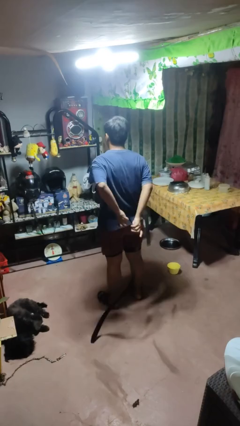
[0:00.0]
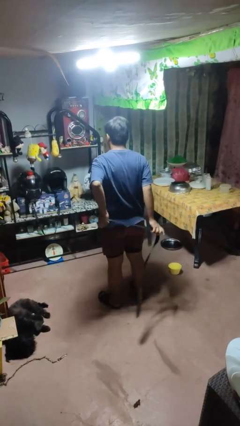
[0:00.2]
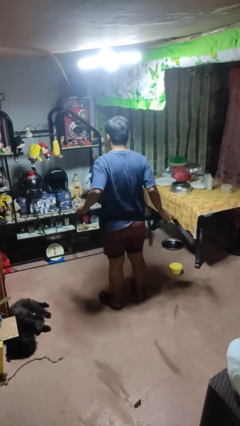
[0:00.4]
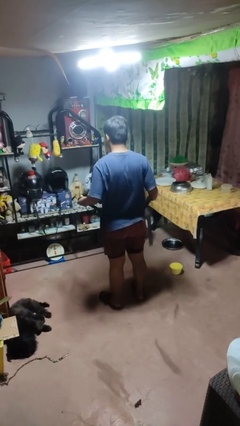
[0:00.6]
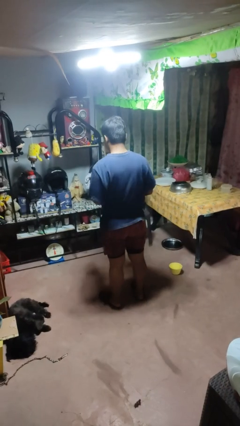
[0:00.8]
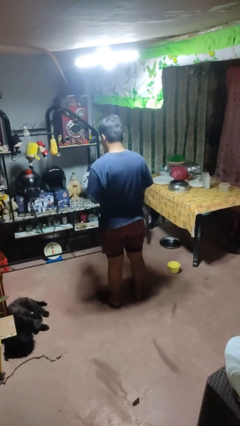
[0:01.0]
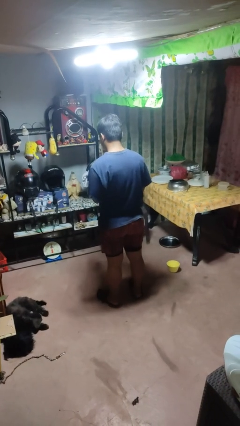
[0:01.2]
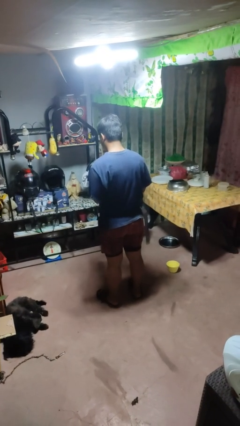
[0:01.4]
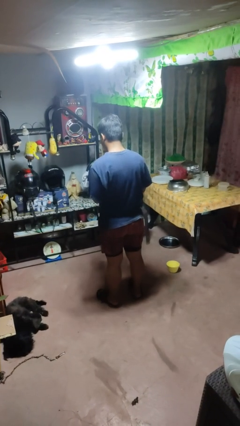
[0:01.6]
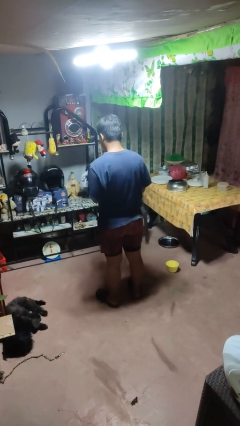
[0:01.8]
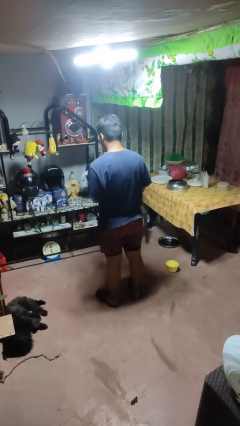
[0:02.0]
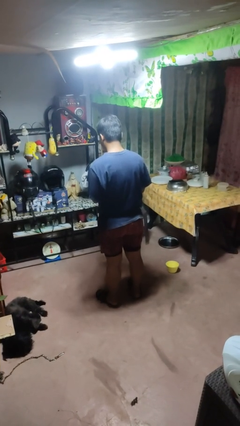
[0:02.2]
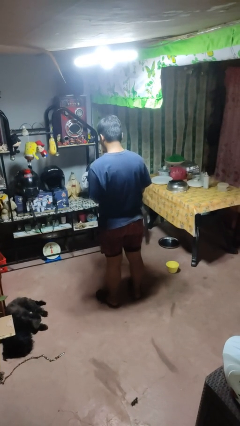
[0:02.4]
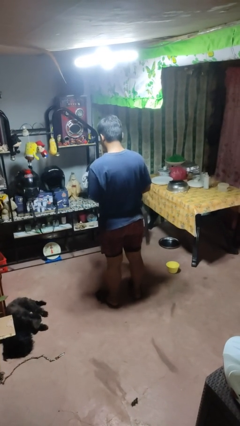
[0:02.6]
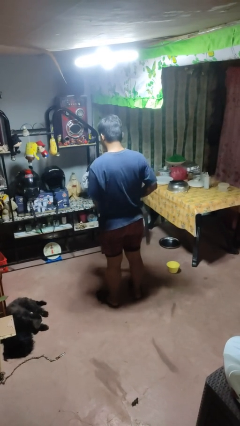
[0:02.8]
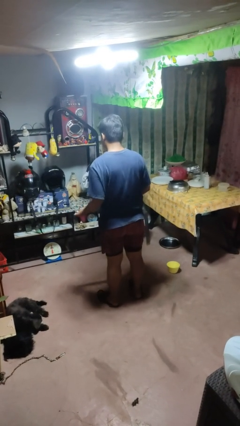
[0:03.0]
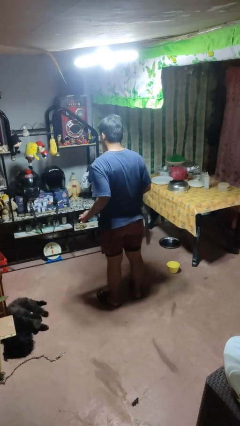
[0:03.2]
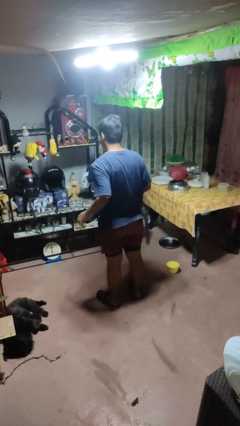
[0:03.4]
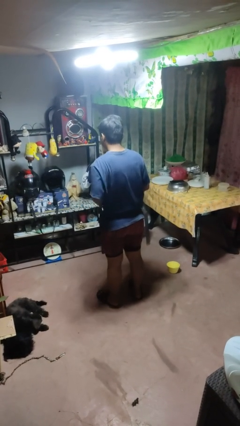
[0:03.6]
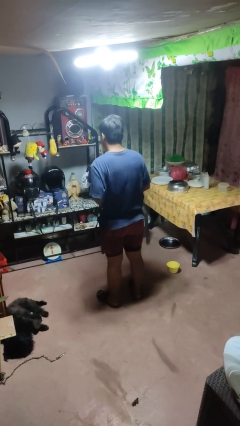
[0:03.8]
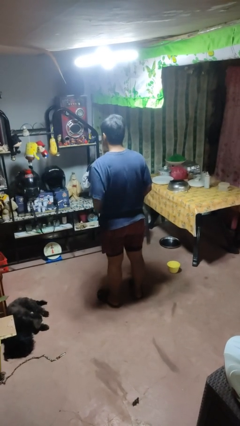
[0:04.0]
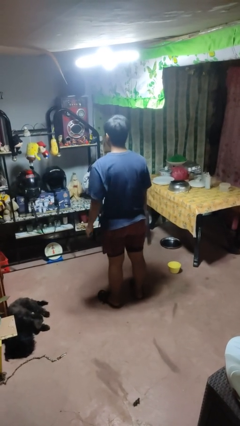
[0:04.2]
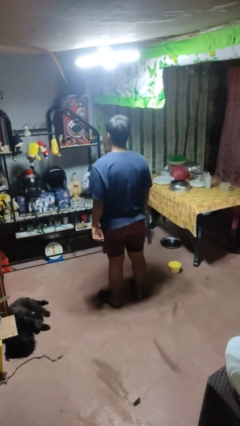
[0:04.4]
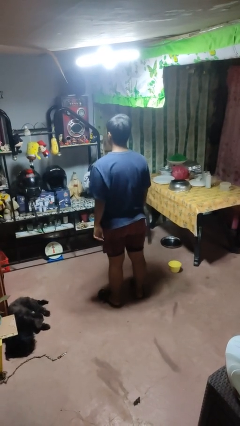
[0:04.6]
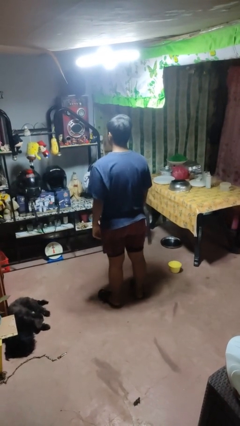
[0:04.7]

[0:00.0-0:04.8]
person puts on belt

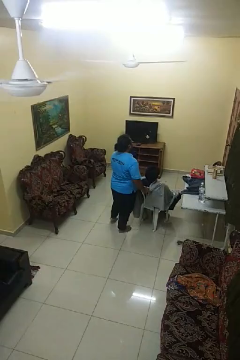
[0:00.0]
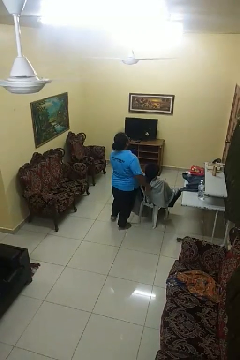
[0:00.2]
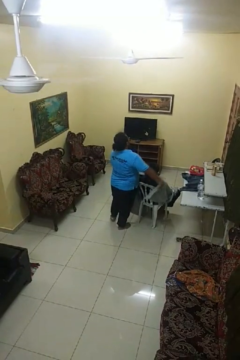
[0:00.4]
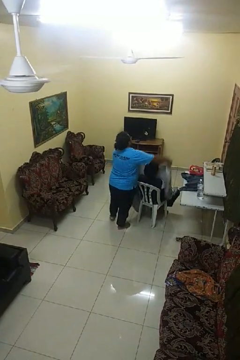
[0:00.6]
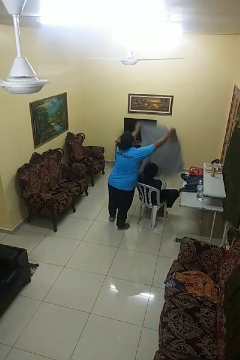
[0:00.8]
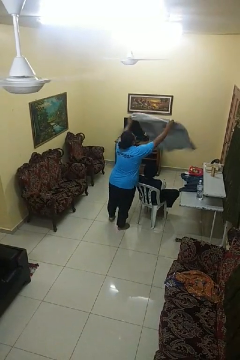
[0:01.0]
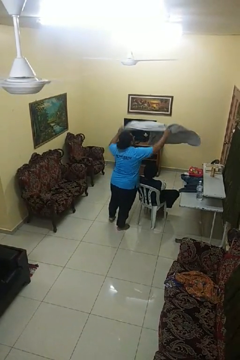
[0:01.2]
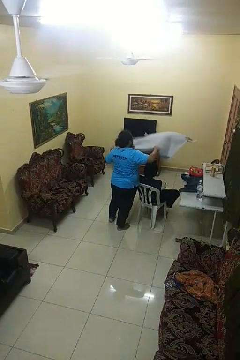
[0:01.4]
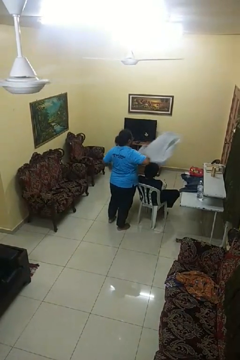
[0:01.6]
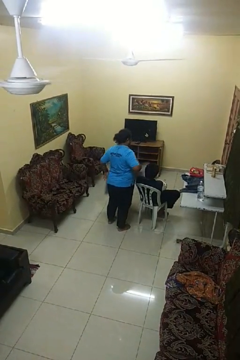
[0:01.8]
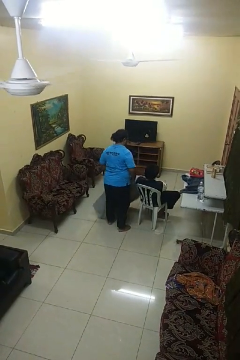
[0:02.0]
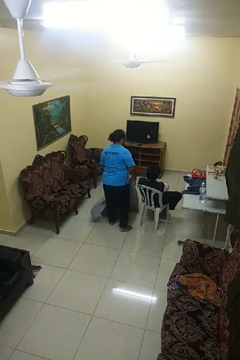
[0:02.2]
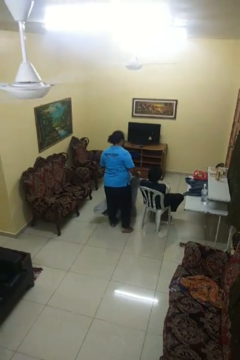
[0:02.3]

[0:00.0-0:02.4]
person uncovers friend with blanket

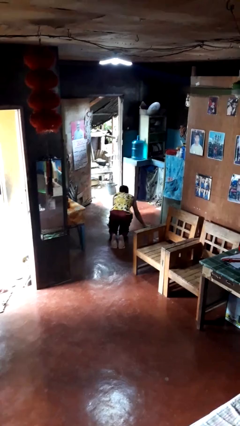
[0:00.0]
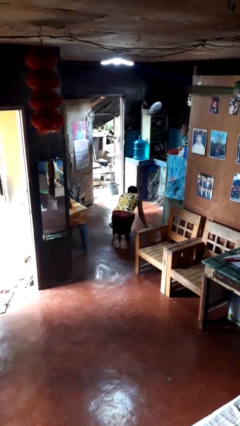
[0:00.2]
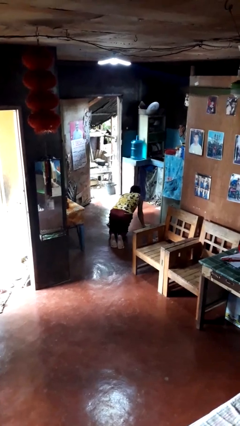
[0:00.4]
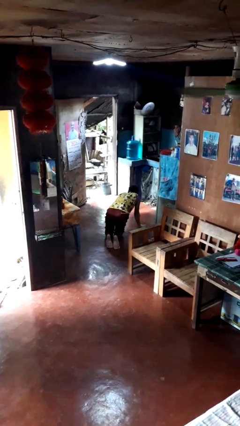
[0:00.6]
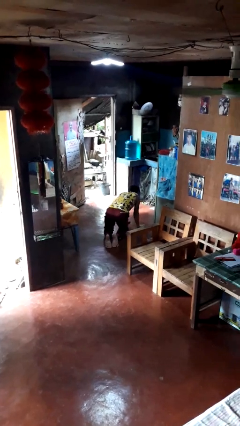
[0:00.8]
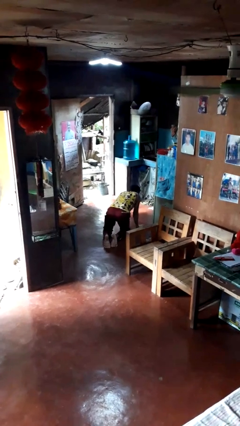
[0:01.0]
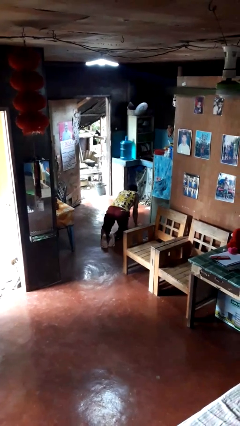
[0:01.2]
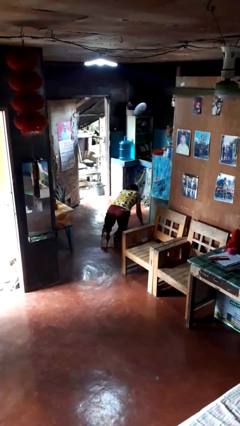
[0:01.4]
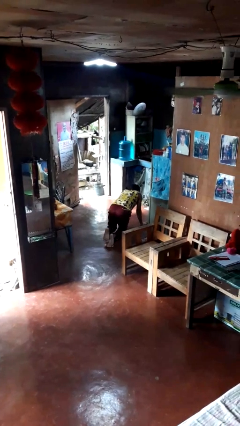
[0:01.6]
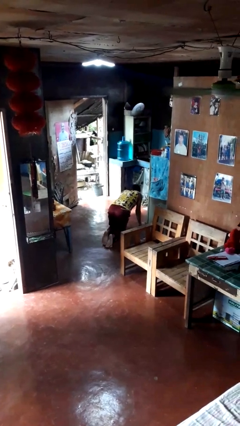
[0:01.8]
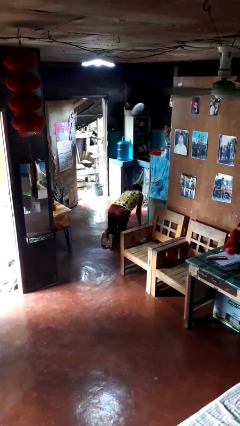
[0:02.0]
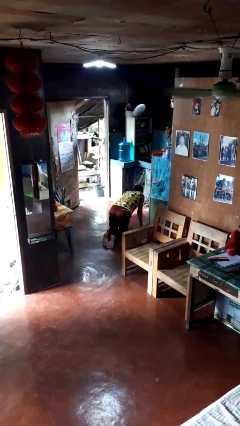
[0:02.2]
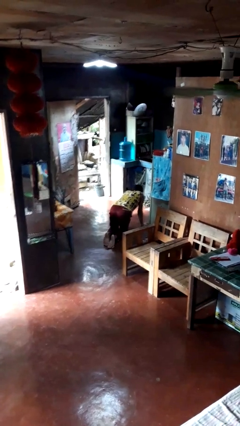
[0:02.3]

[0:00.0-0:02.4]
person crawls

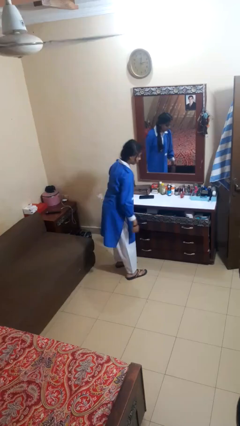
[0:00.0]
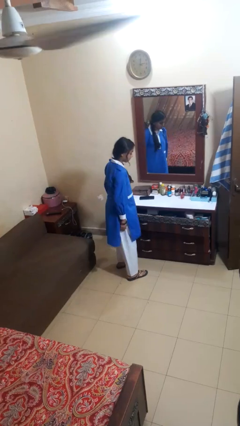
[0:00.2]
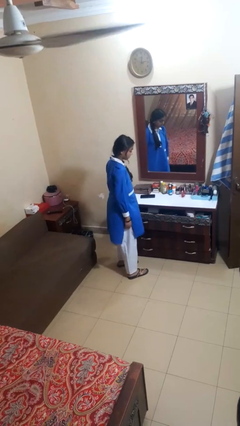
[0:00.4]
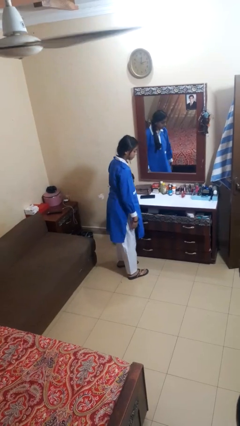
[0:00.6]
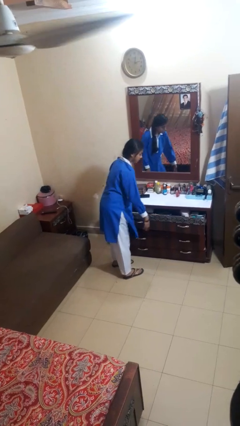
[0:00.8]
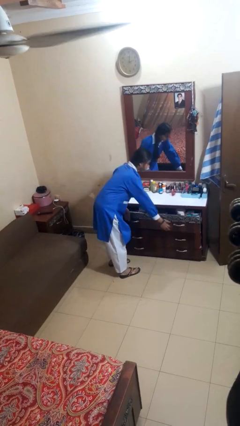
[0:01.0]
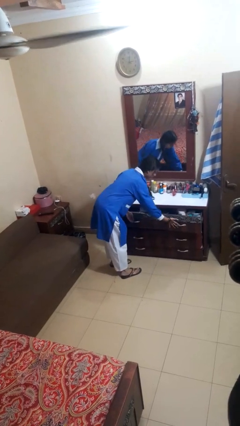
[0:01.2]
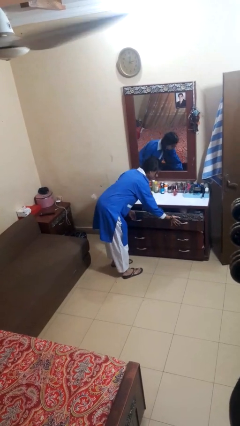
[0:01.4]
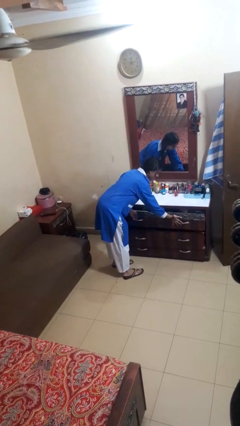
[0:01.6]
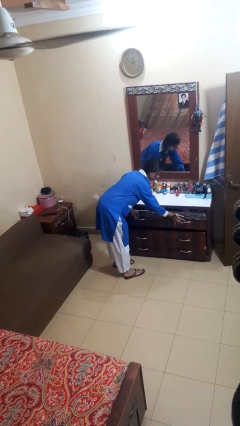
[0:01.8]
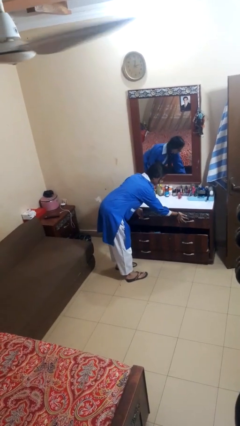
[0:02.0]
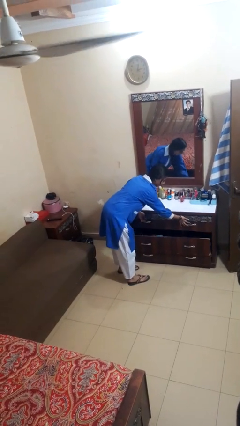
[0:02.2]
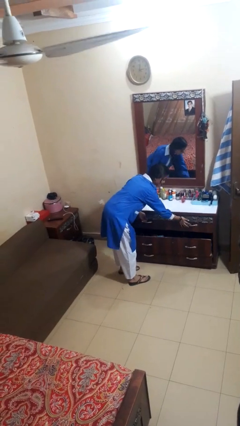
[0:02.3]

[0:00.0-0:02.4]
person closes dresser drawer

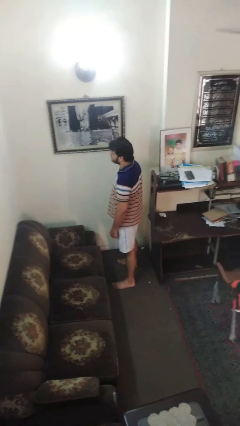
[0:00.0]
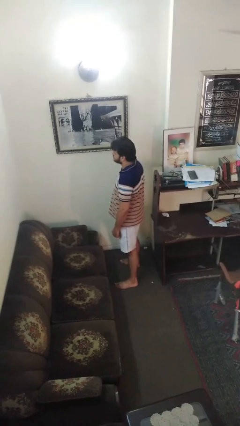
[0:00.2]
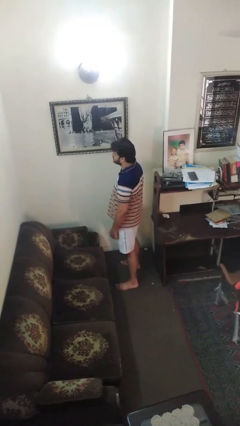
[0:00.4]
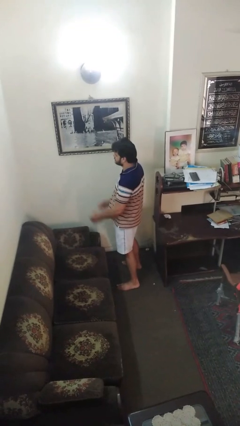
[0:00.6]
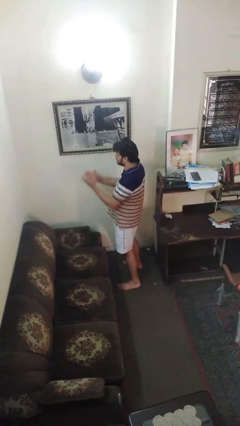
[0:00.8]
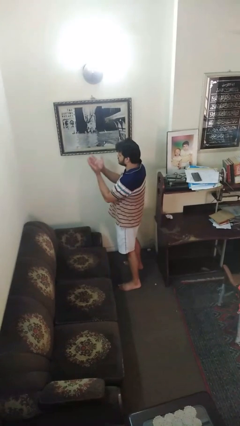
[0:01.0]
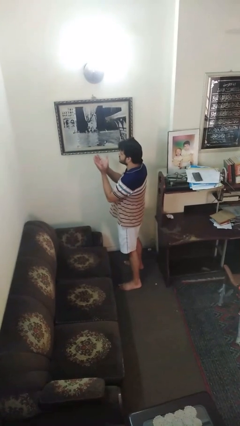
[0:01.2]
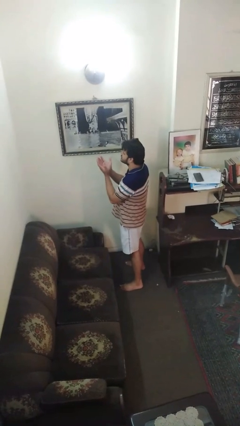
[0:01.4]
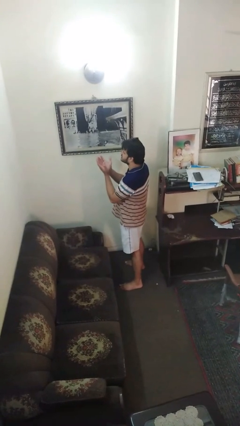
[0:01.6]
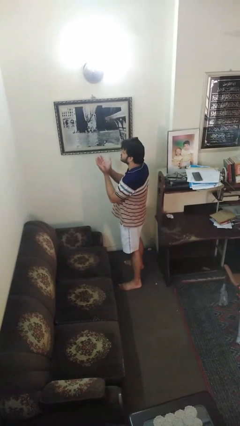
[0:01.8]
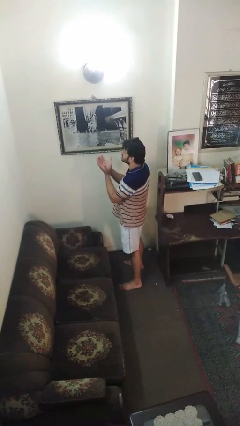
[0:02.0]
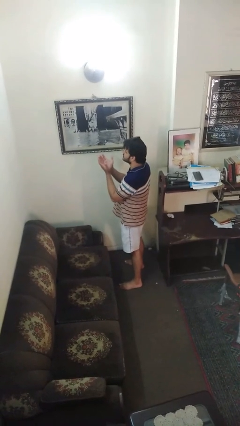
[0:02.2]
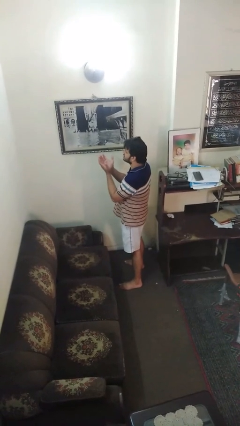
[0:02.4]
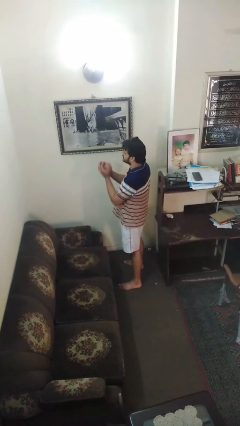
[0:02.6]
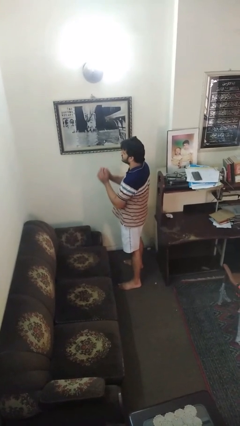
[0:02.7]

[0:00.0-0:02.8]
person prays

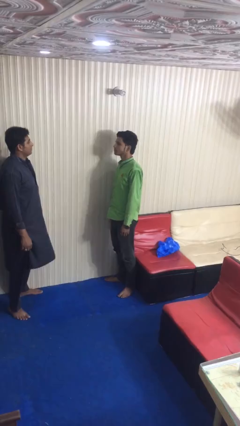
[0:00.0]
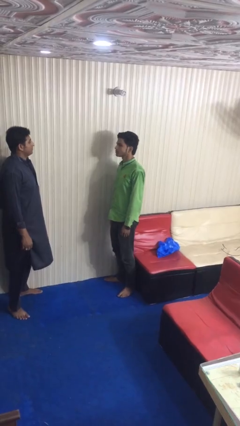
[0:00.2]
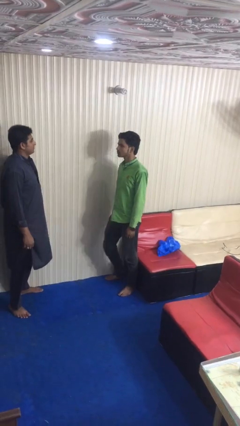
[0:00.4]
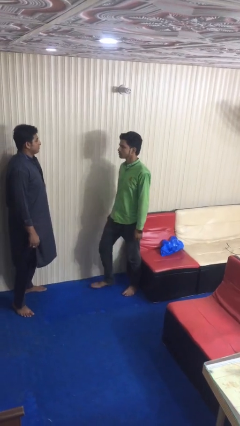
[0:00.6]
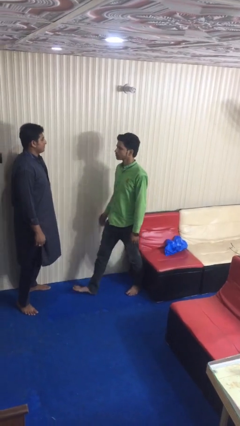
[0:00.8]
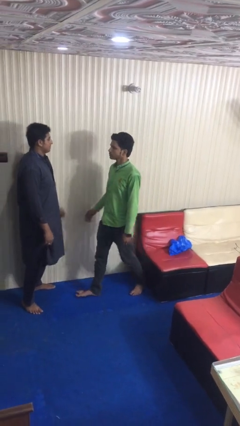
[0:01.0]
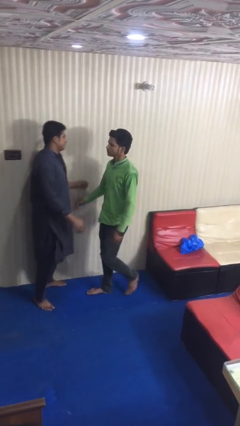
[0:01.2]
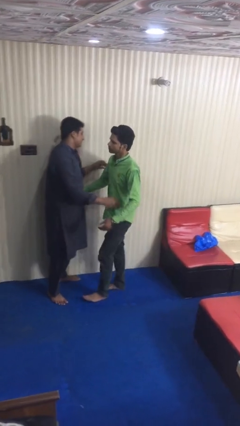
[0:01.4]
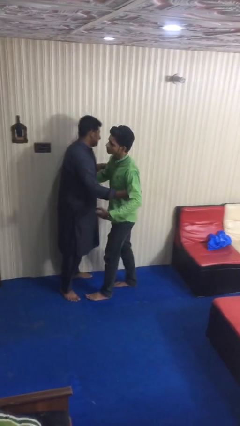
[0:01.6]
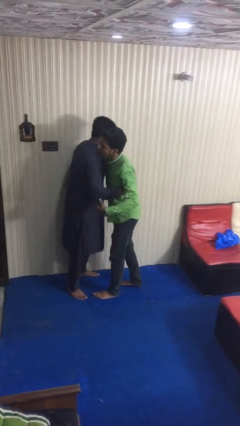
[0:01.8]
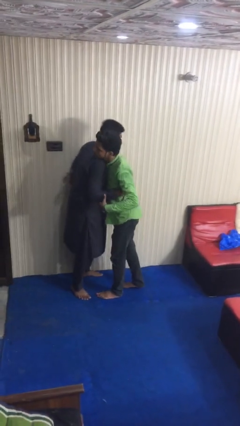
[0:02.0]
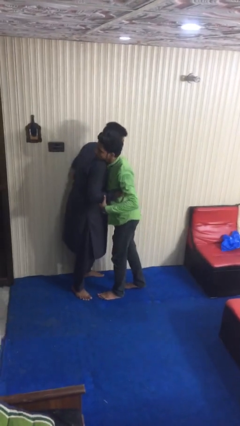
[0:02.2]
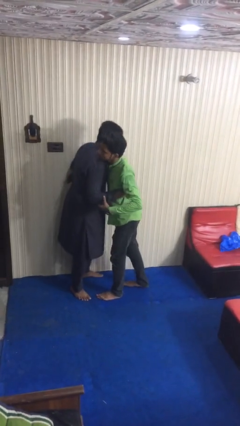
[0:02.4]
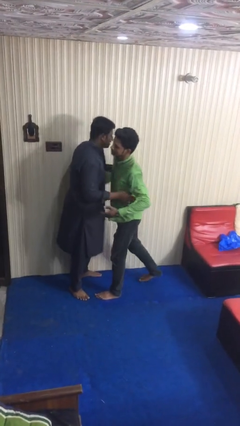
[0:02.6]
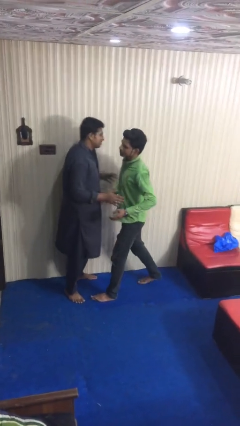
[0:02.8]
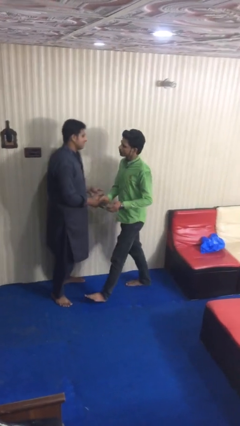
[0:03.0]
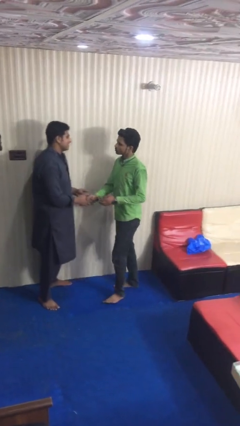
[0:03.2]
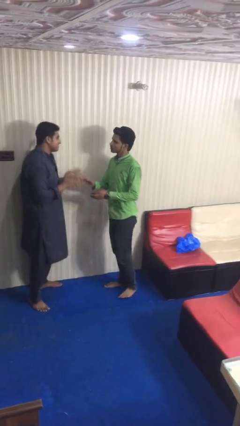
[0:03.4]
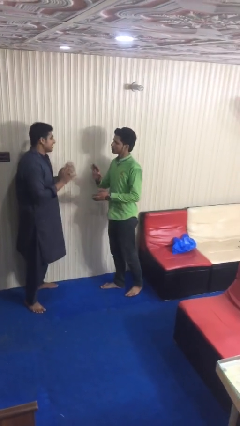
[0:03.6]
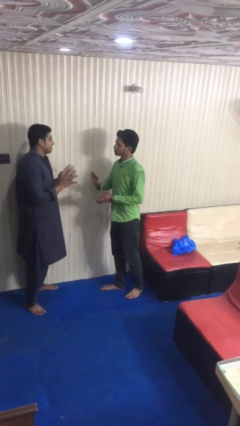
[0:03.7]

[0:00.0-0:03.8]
person embraces person
